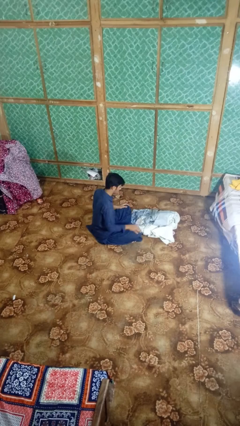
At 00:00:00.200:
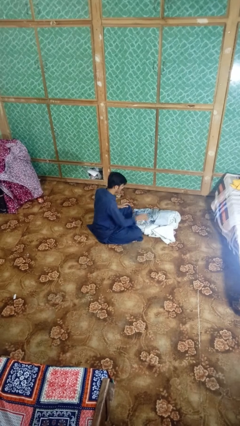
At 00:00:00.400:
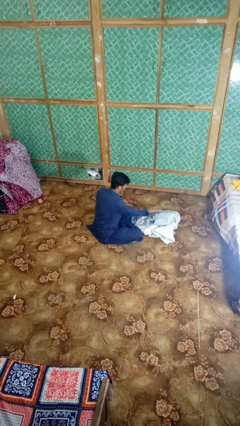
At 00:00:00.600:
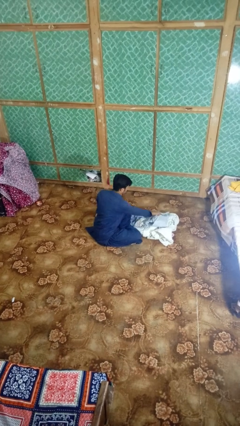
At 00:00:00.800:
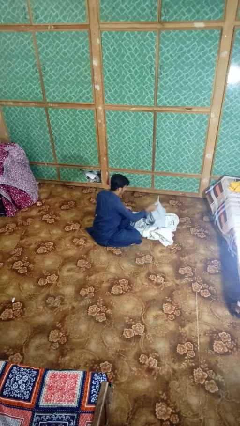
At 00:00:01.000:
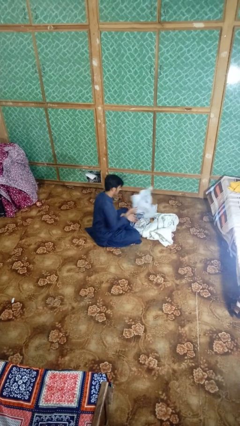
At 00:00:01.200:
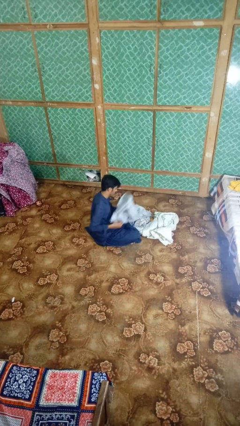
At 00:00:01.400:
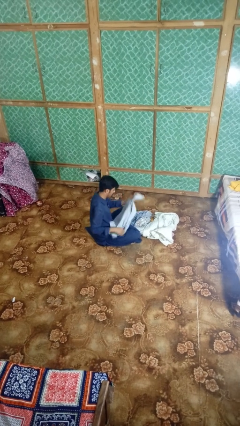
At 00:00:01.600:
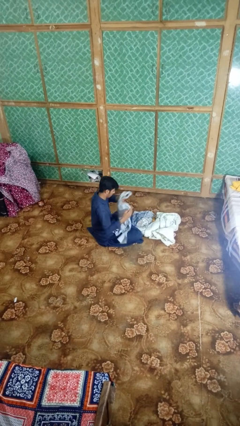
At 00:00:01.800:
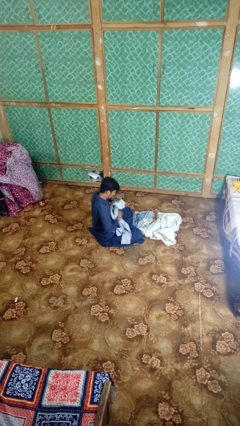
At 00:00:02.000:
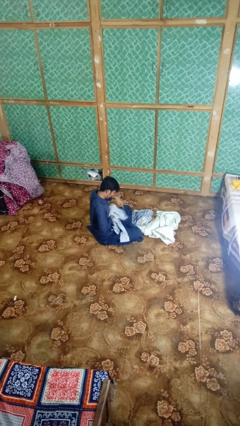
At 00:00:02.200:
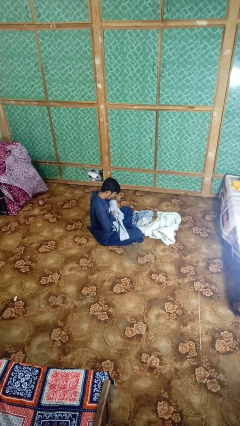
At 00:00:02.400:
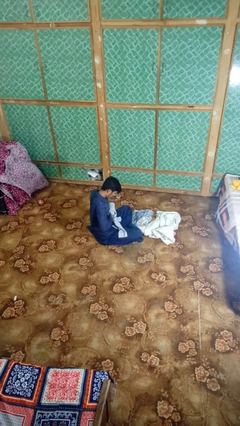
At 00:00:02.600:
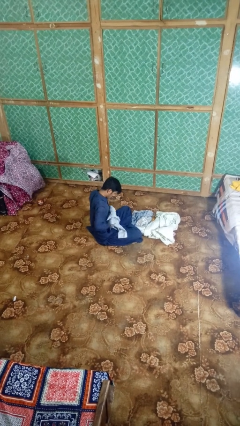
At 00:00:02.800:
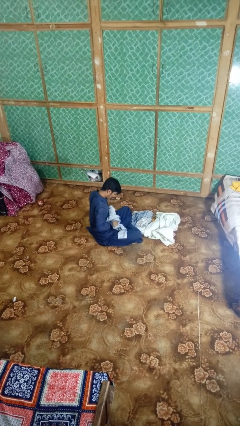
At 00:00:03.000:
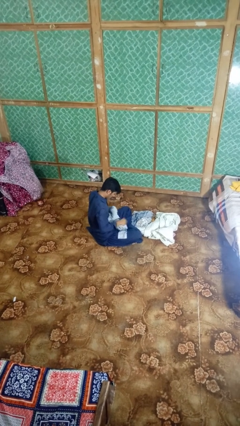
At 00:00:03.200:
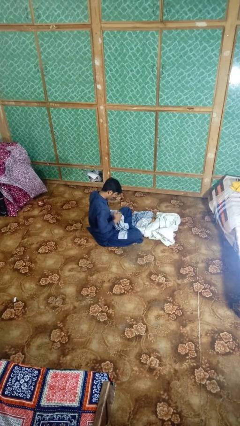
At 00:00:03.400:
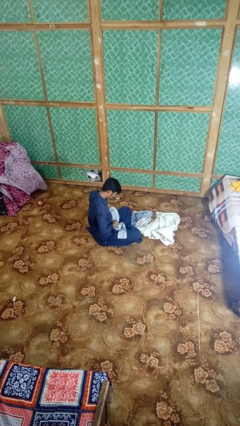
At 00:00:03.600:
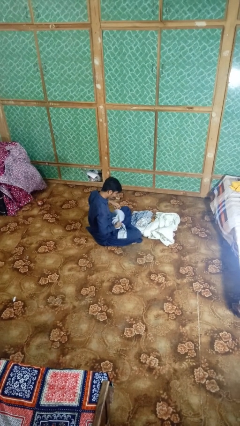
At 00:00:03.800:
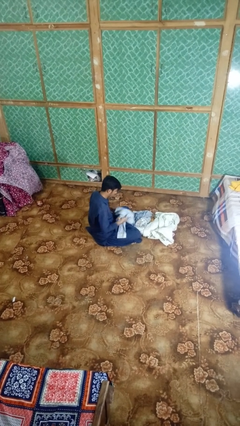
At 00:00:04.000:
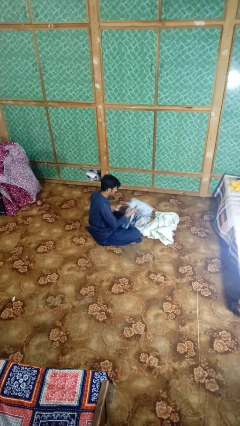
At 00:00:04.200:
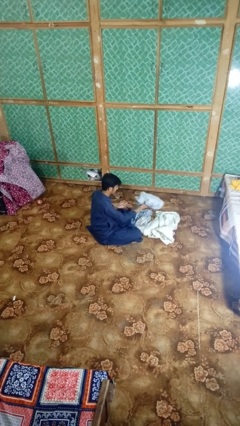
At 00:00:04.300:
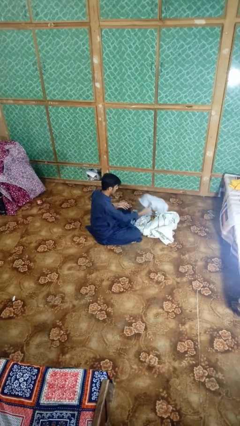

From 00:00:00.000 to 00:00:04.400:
person folds shirt

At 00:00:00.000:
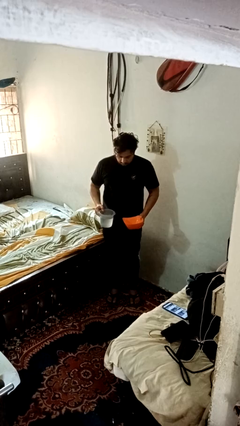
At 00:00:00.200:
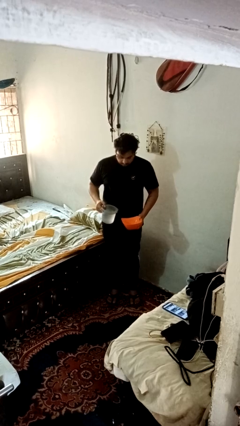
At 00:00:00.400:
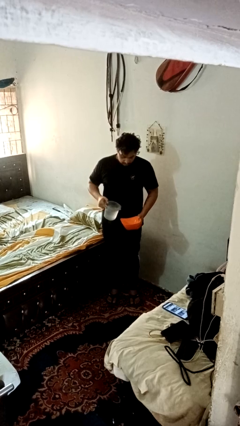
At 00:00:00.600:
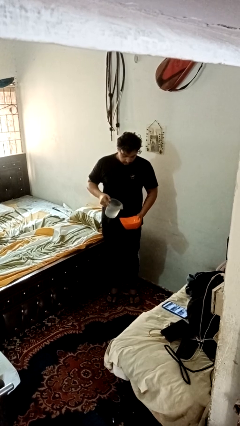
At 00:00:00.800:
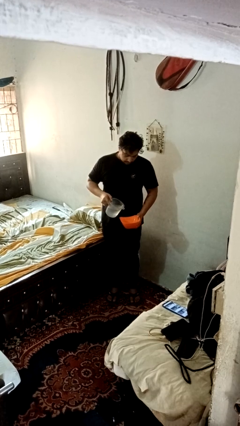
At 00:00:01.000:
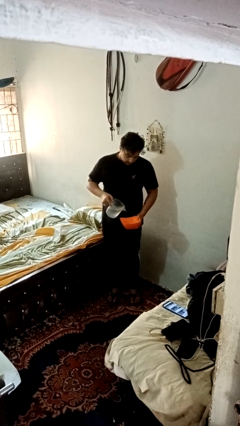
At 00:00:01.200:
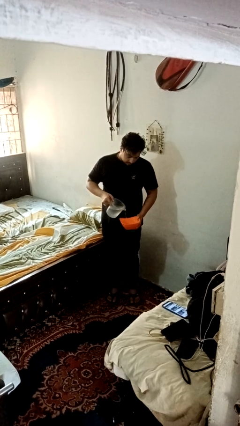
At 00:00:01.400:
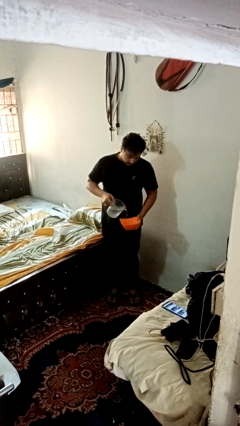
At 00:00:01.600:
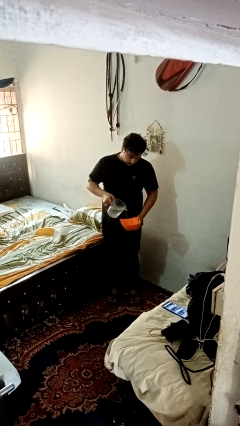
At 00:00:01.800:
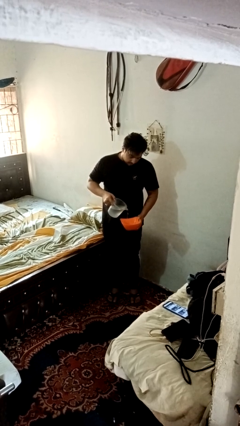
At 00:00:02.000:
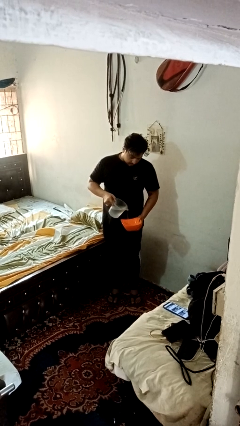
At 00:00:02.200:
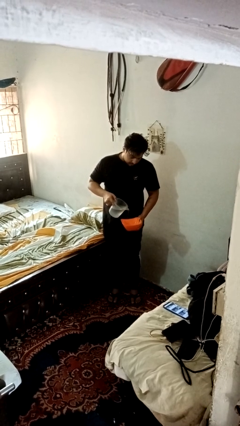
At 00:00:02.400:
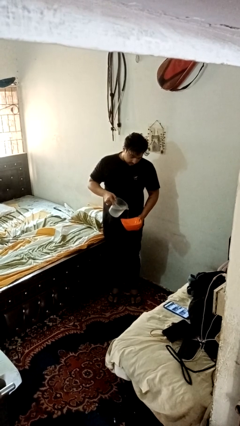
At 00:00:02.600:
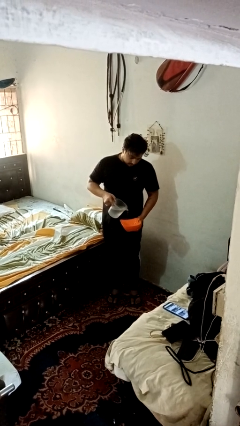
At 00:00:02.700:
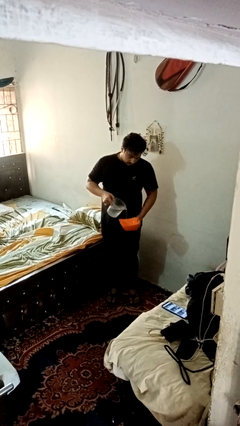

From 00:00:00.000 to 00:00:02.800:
person pours into bowl

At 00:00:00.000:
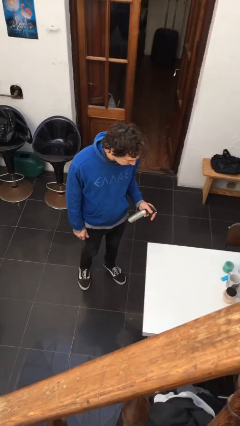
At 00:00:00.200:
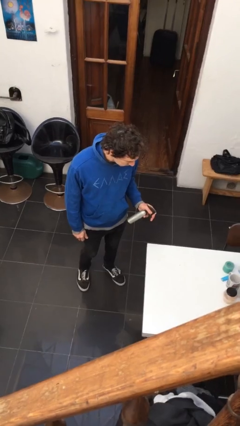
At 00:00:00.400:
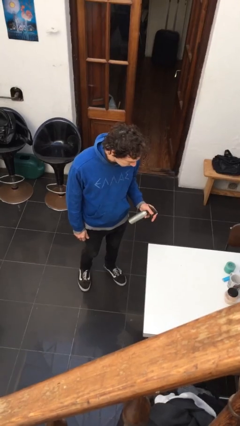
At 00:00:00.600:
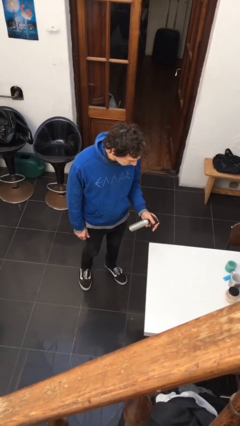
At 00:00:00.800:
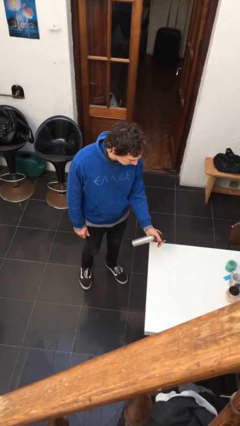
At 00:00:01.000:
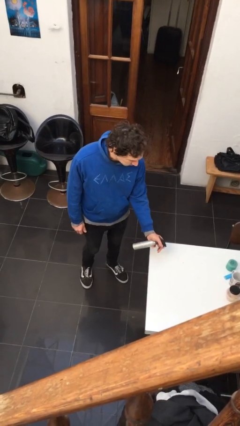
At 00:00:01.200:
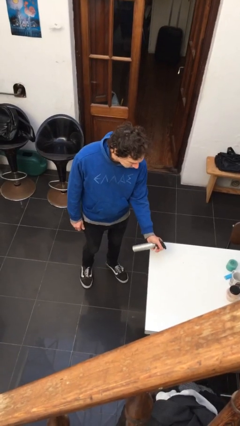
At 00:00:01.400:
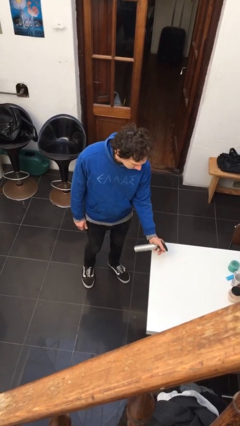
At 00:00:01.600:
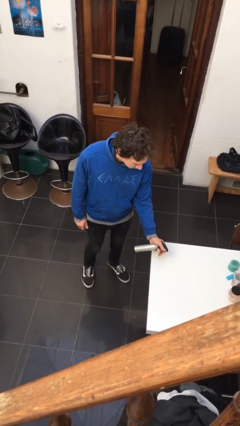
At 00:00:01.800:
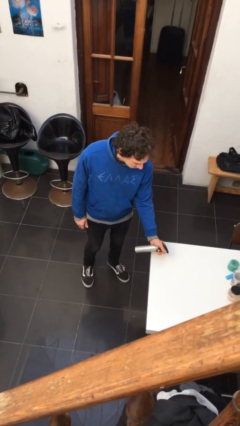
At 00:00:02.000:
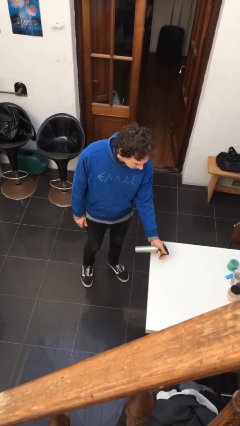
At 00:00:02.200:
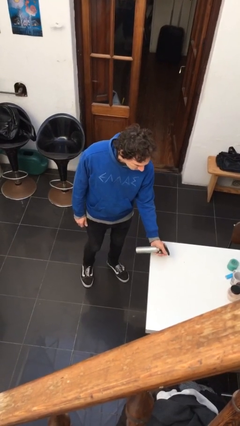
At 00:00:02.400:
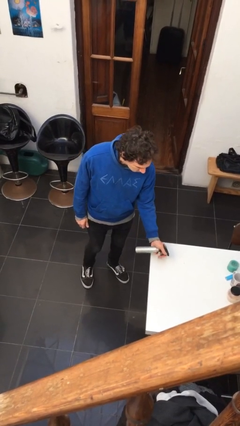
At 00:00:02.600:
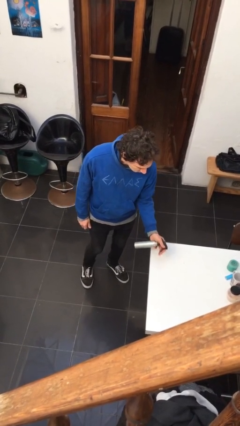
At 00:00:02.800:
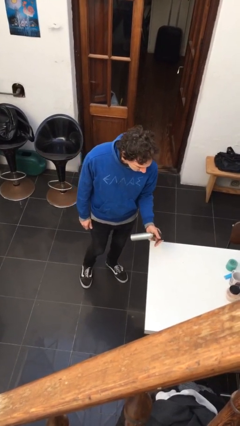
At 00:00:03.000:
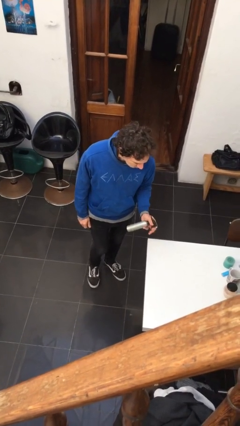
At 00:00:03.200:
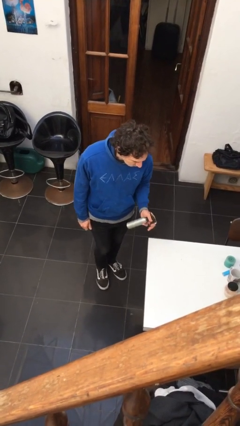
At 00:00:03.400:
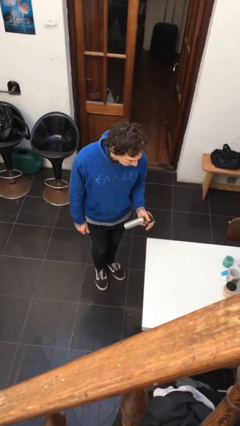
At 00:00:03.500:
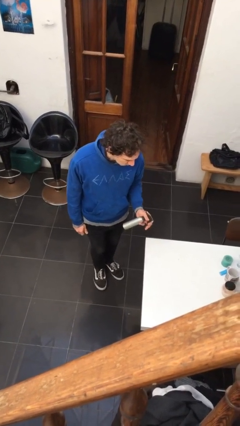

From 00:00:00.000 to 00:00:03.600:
person sprays from bottle

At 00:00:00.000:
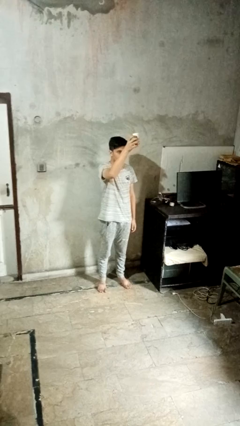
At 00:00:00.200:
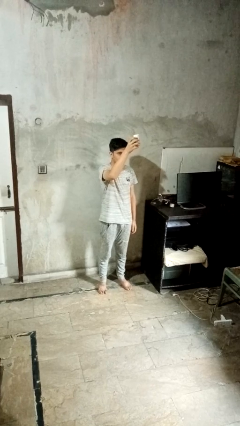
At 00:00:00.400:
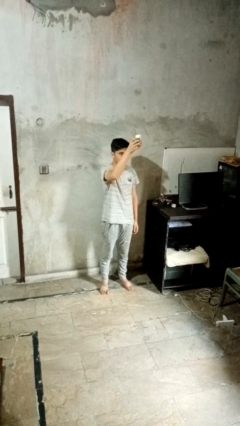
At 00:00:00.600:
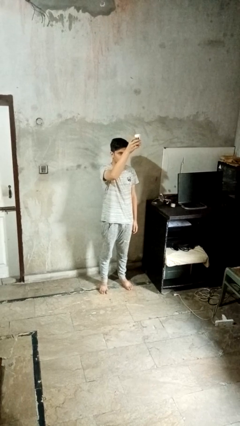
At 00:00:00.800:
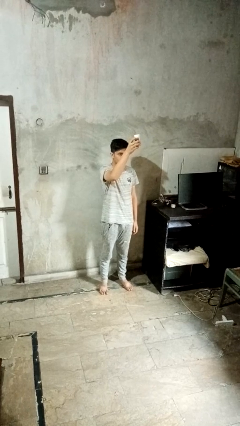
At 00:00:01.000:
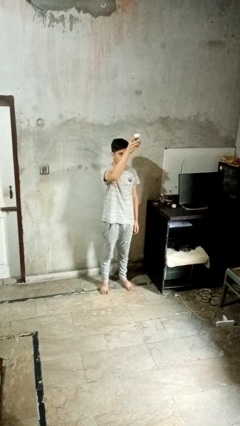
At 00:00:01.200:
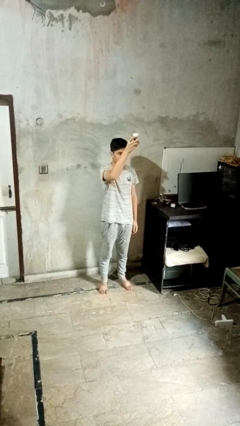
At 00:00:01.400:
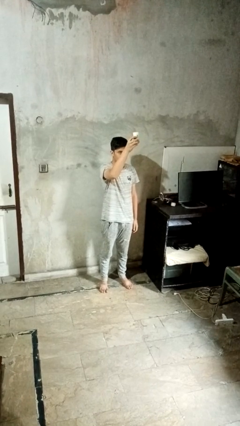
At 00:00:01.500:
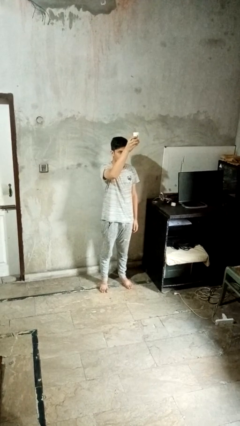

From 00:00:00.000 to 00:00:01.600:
person drops object

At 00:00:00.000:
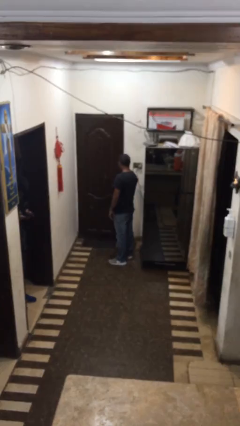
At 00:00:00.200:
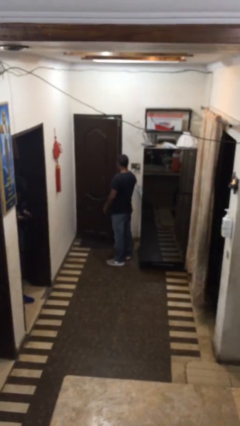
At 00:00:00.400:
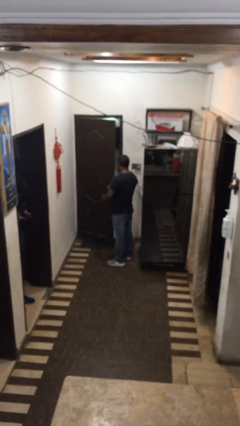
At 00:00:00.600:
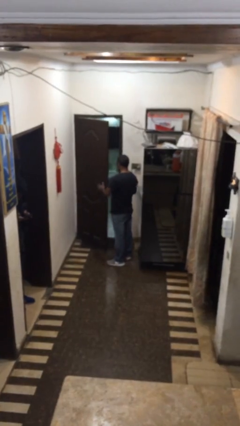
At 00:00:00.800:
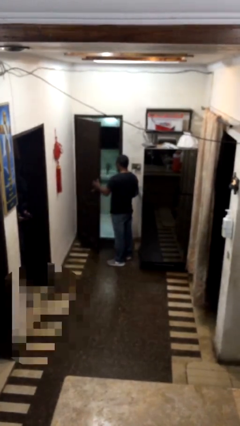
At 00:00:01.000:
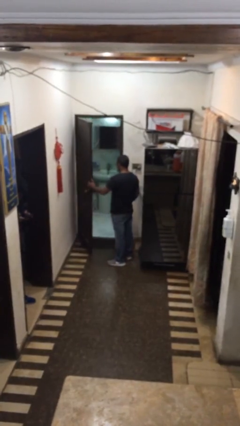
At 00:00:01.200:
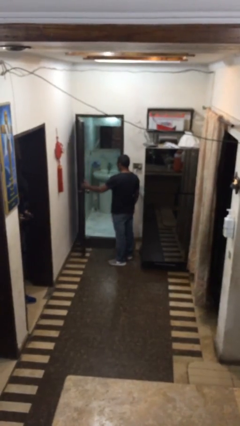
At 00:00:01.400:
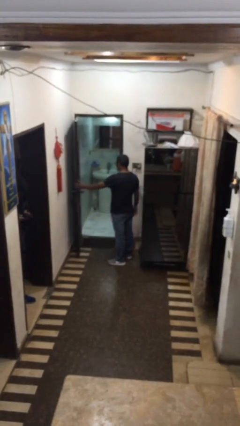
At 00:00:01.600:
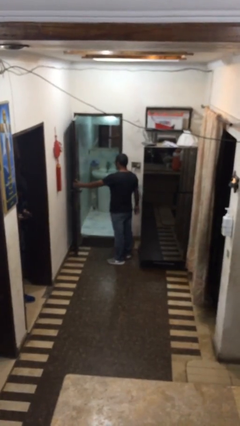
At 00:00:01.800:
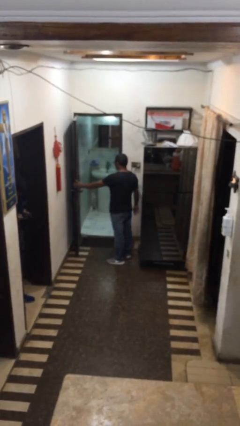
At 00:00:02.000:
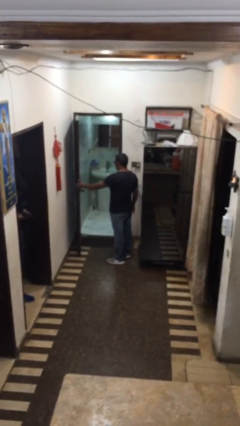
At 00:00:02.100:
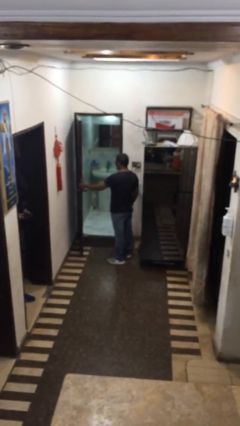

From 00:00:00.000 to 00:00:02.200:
person opens facility door

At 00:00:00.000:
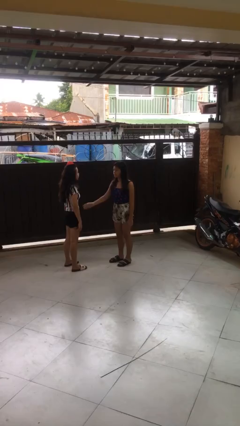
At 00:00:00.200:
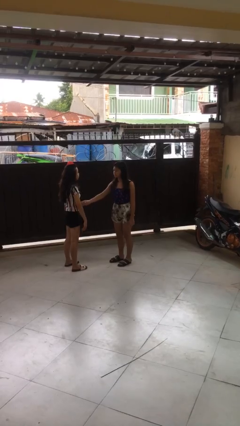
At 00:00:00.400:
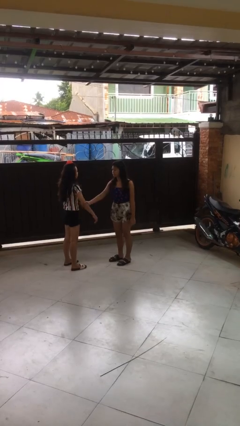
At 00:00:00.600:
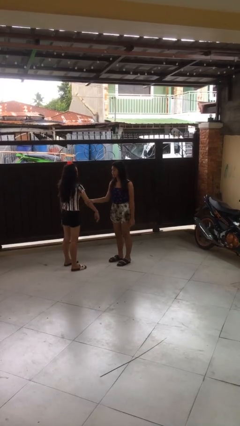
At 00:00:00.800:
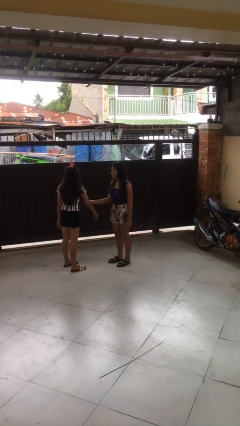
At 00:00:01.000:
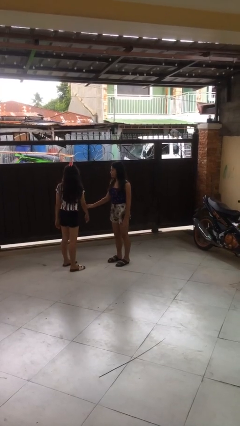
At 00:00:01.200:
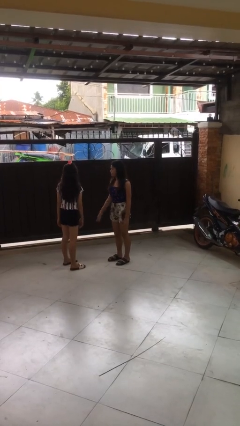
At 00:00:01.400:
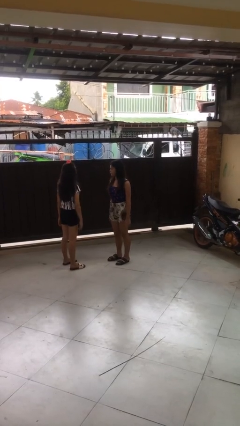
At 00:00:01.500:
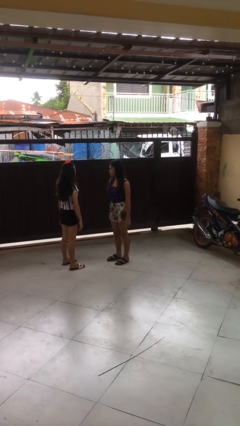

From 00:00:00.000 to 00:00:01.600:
person grabs person by forearm

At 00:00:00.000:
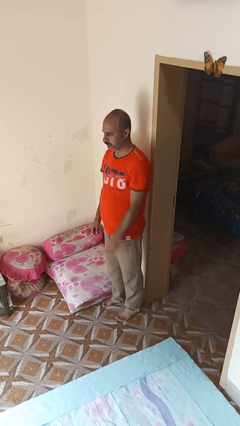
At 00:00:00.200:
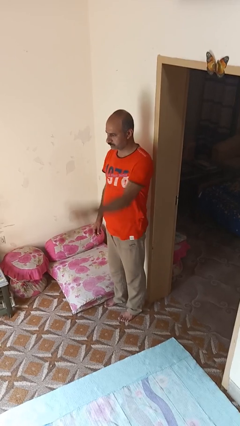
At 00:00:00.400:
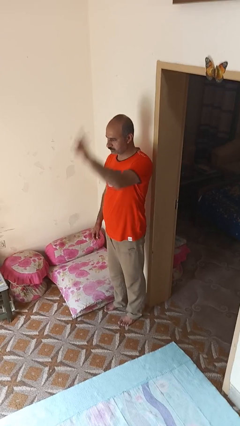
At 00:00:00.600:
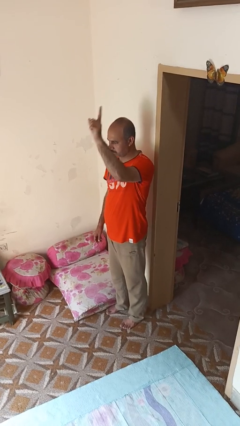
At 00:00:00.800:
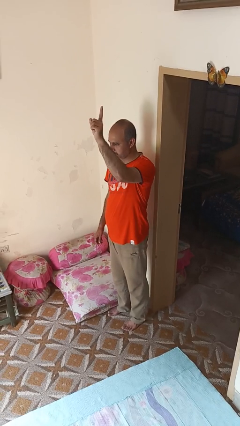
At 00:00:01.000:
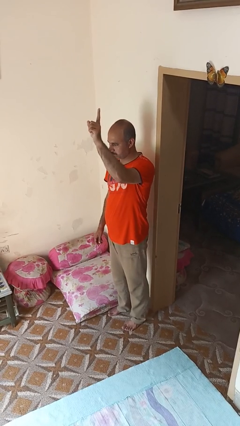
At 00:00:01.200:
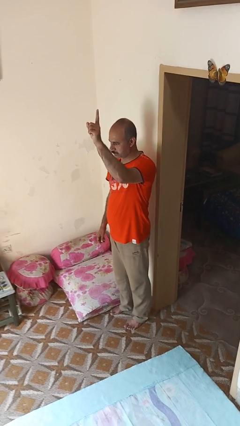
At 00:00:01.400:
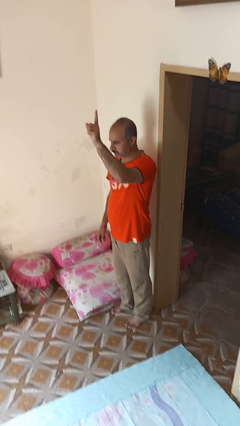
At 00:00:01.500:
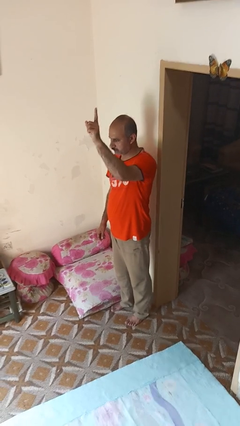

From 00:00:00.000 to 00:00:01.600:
person gestures swipe up